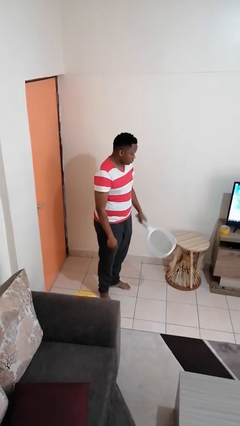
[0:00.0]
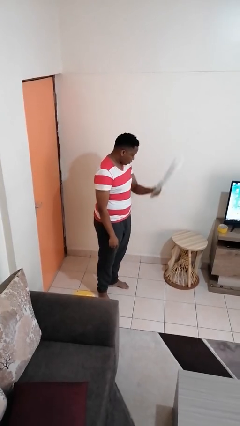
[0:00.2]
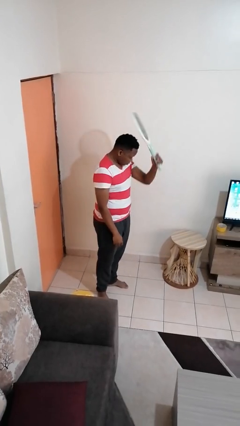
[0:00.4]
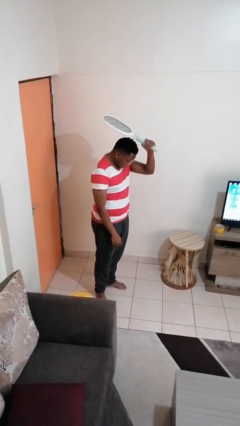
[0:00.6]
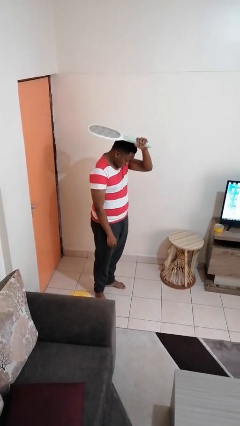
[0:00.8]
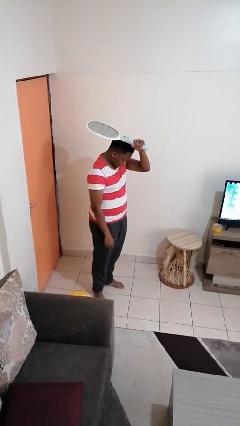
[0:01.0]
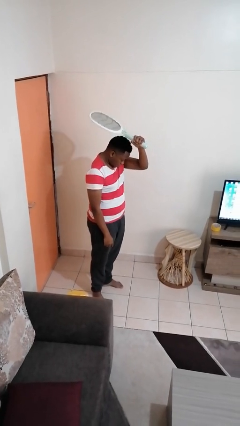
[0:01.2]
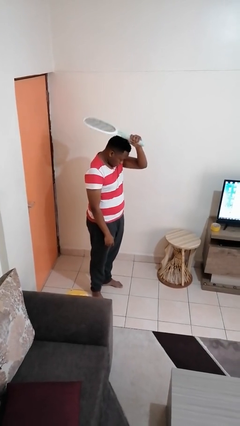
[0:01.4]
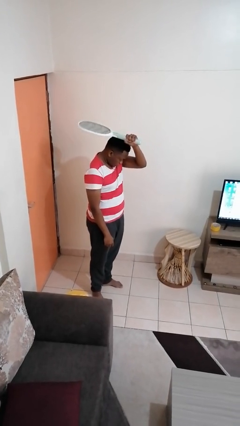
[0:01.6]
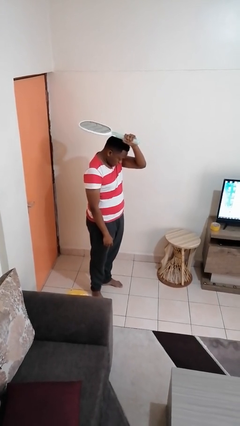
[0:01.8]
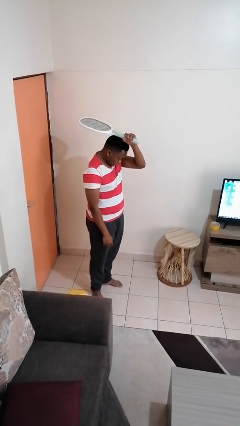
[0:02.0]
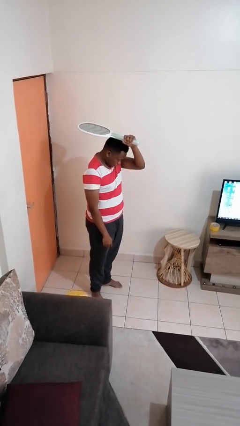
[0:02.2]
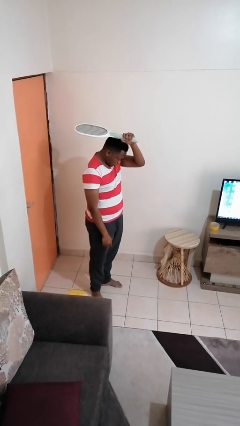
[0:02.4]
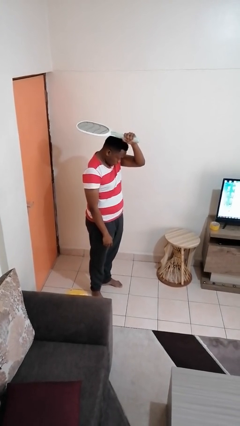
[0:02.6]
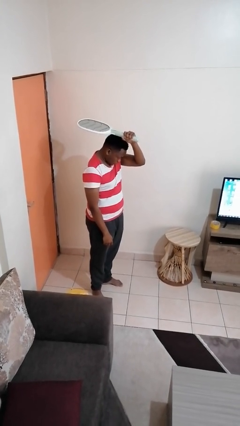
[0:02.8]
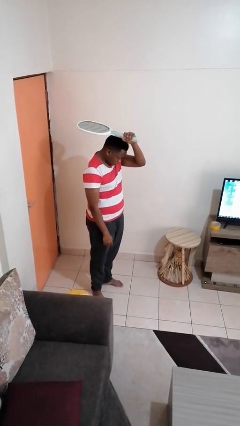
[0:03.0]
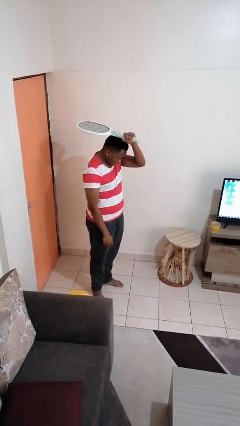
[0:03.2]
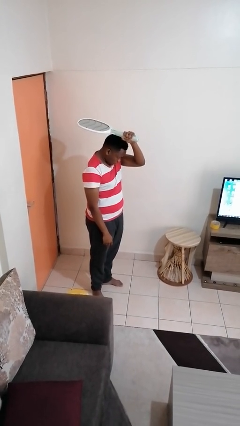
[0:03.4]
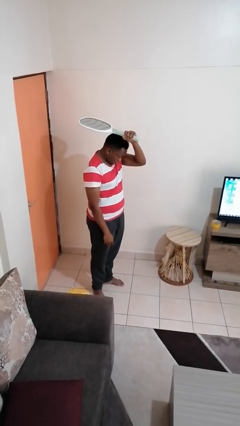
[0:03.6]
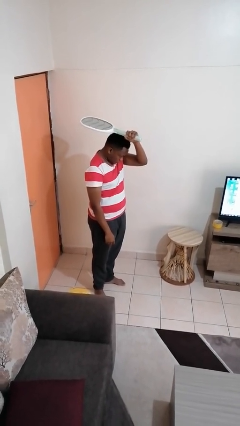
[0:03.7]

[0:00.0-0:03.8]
person holds object above head

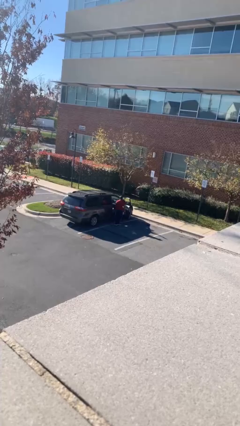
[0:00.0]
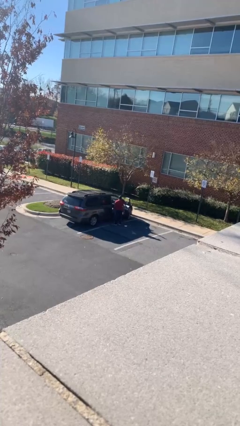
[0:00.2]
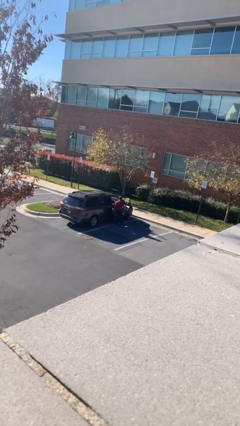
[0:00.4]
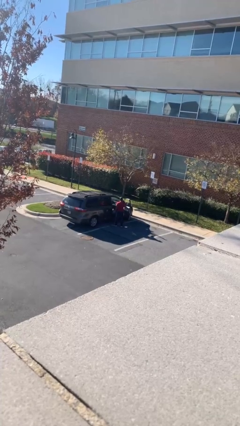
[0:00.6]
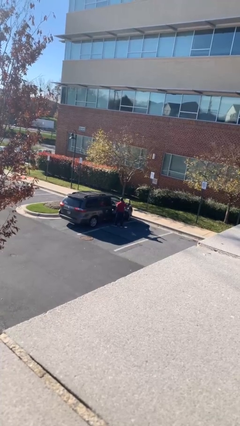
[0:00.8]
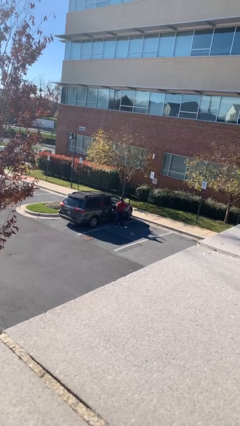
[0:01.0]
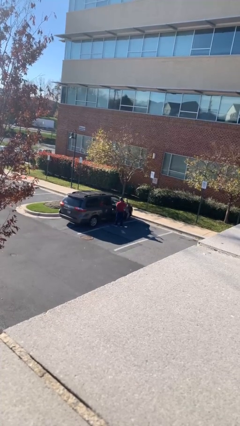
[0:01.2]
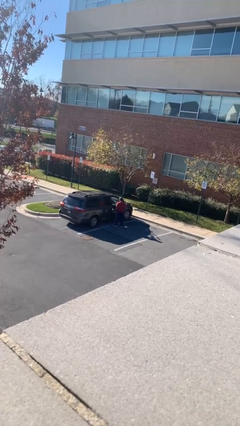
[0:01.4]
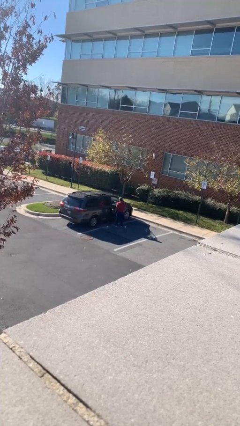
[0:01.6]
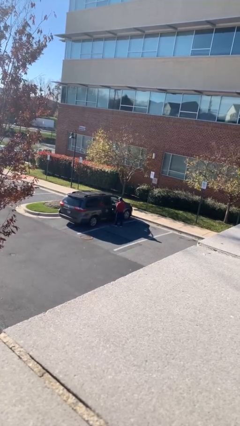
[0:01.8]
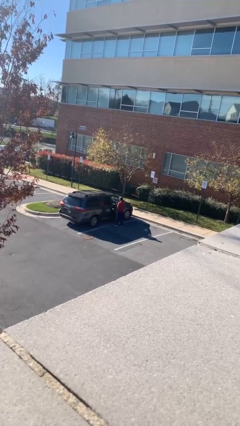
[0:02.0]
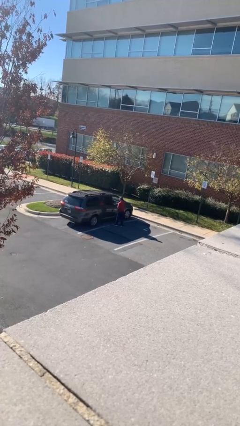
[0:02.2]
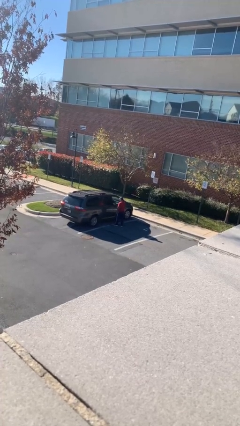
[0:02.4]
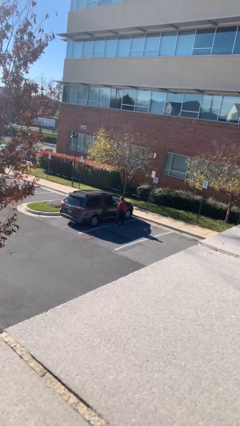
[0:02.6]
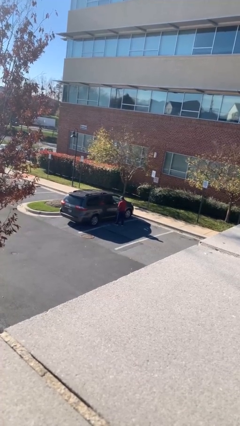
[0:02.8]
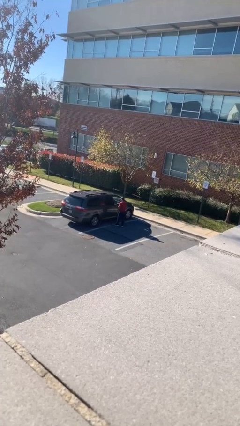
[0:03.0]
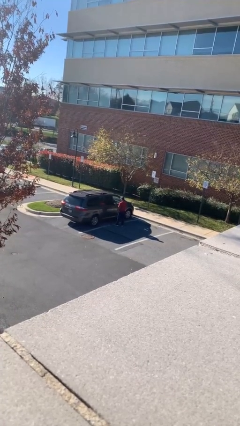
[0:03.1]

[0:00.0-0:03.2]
person closes car door

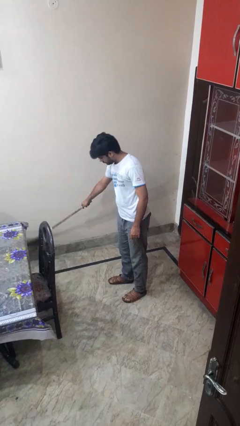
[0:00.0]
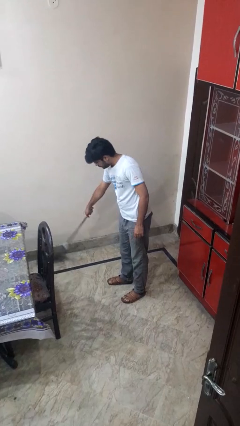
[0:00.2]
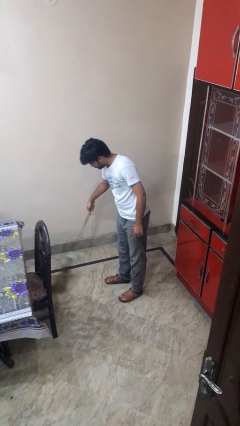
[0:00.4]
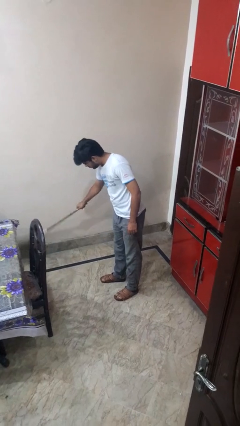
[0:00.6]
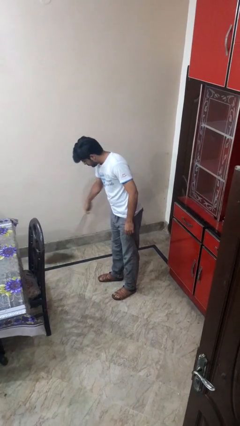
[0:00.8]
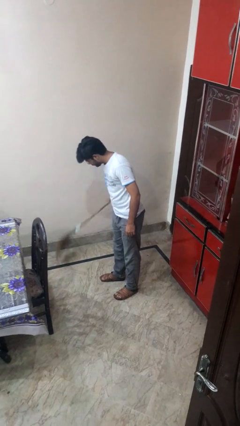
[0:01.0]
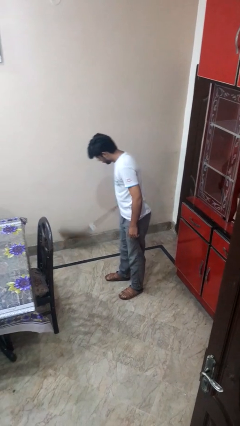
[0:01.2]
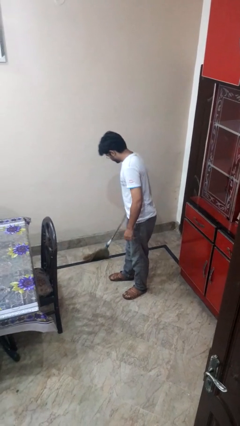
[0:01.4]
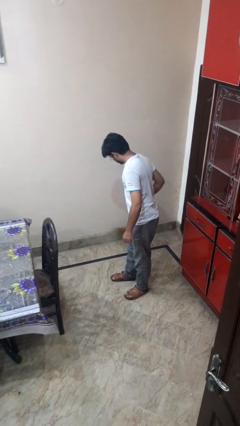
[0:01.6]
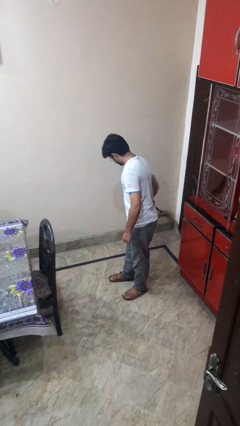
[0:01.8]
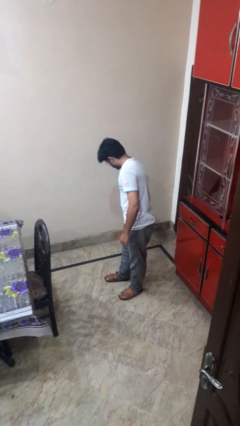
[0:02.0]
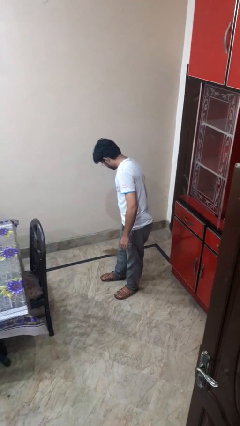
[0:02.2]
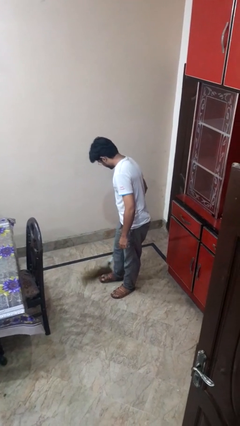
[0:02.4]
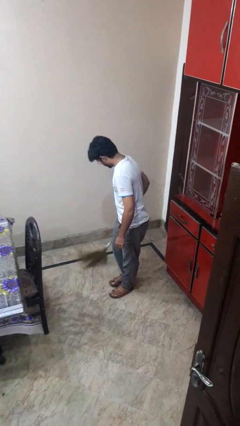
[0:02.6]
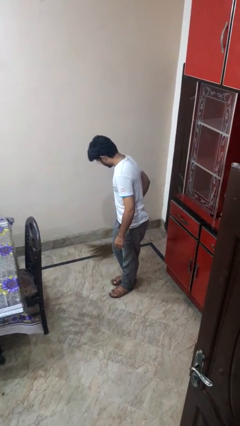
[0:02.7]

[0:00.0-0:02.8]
person sweeps floor

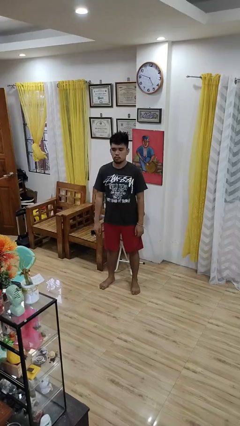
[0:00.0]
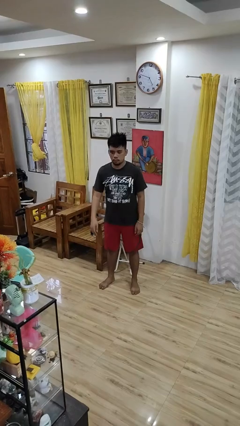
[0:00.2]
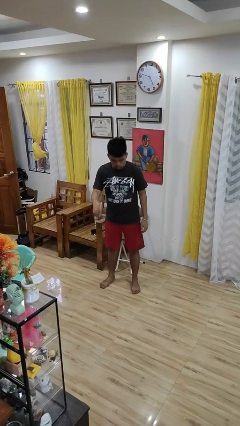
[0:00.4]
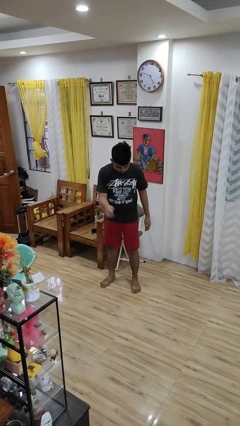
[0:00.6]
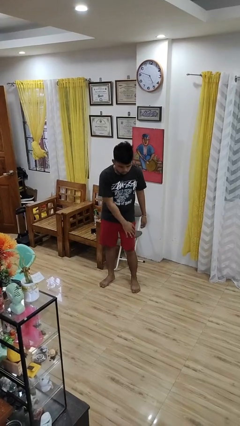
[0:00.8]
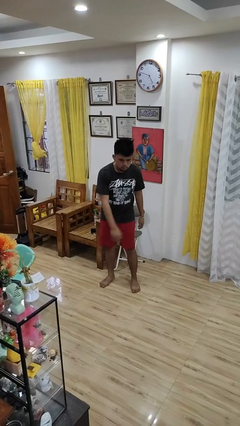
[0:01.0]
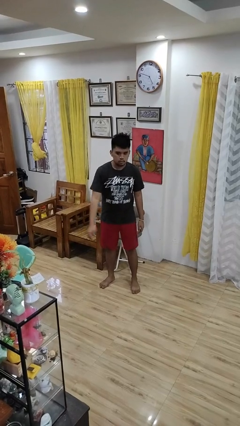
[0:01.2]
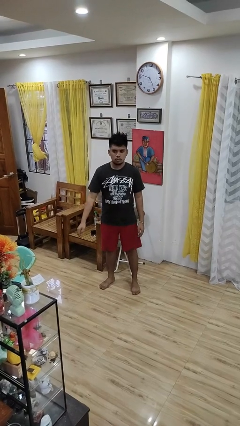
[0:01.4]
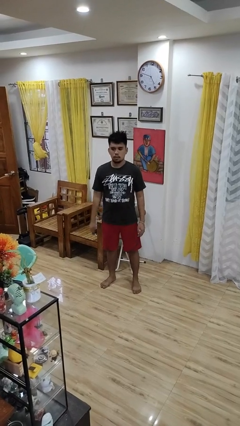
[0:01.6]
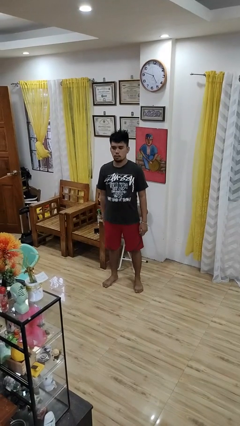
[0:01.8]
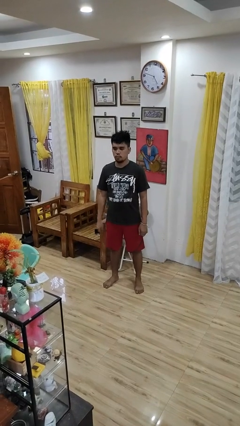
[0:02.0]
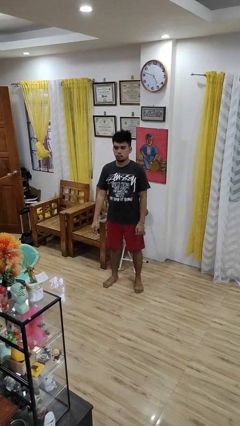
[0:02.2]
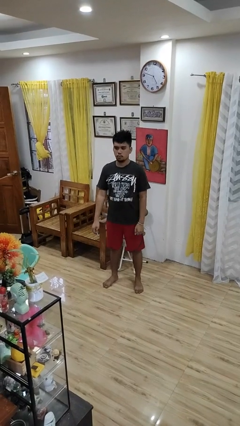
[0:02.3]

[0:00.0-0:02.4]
person slaps hands on thighs

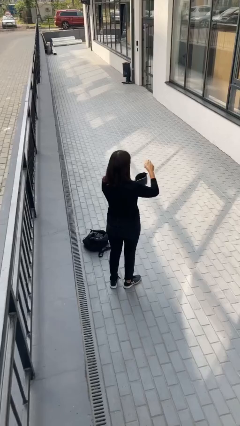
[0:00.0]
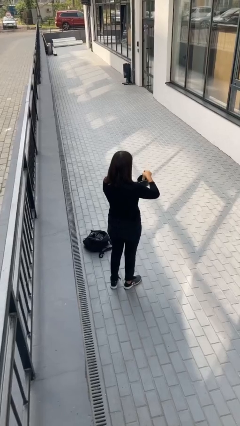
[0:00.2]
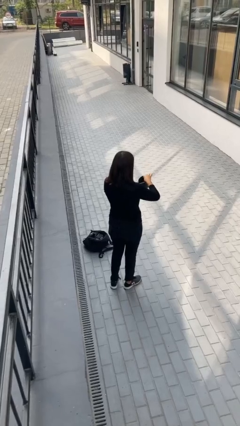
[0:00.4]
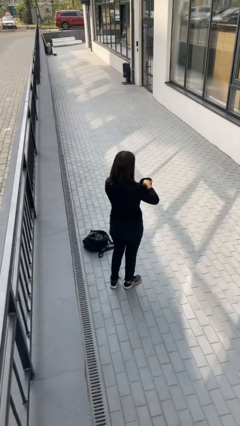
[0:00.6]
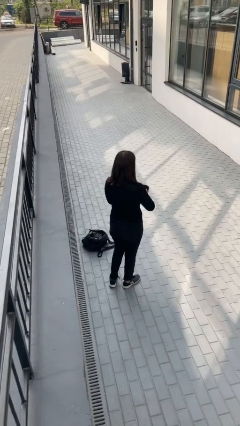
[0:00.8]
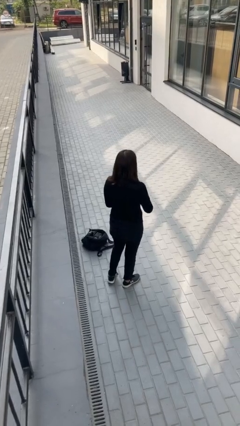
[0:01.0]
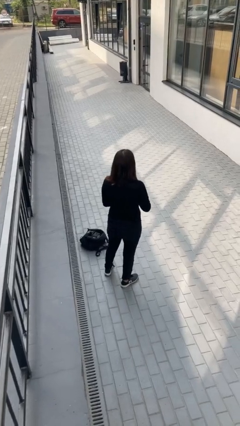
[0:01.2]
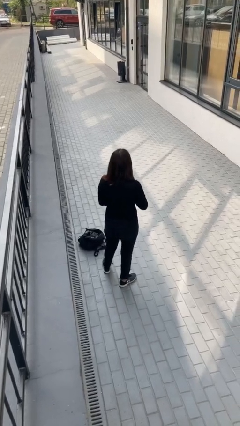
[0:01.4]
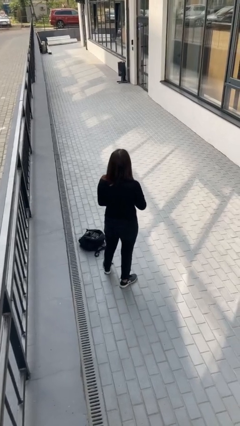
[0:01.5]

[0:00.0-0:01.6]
person puts object into purse

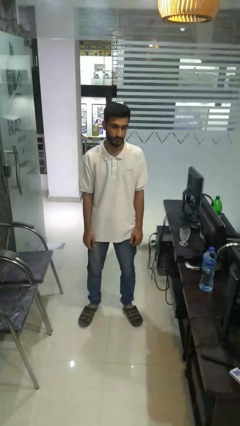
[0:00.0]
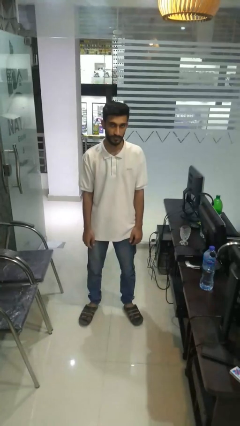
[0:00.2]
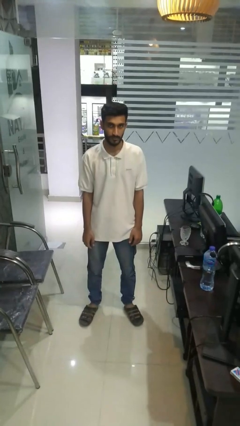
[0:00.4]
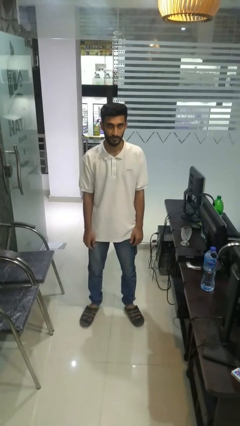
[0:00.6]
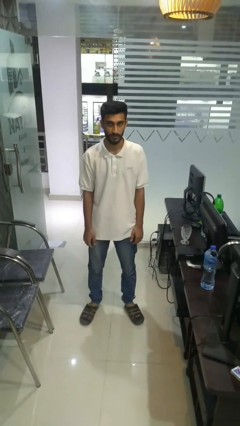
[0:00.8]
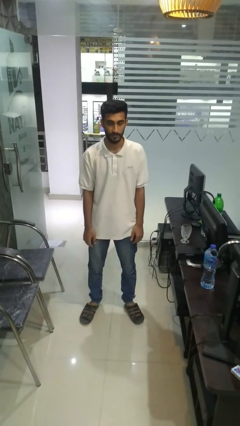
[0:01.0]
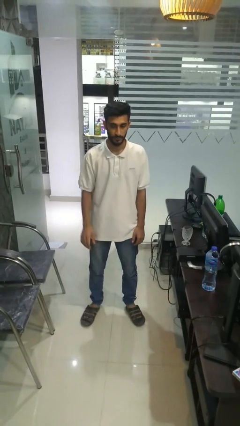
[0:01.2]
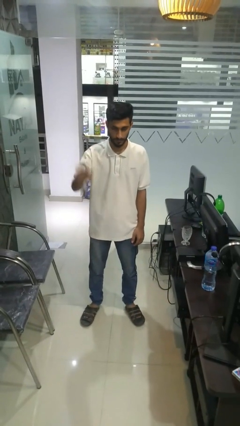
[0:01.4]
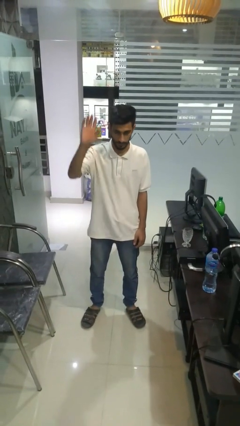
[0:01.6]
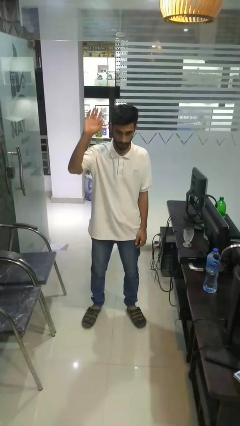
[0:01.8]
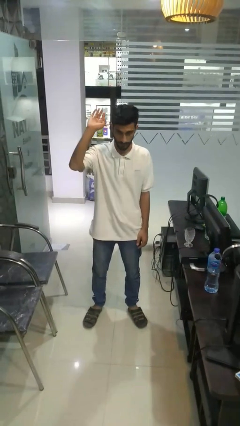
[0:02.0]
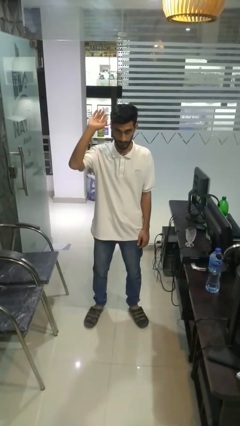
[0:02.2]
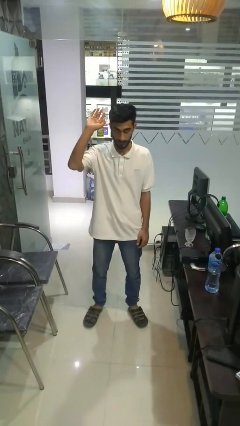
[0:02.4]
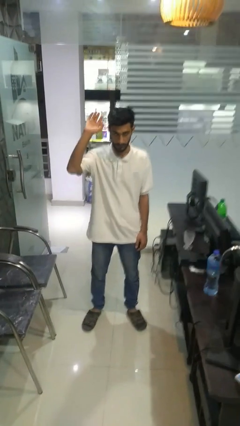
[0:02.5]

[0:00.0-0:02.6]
person gestures raise hand

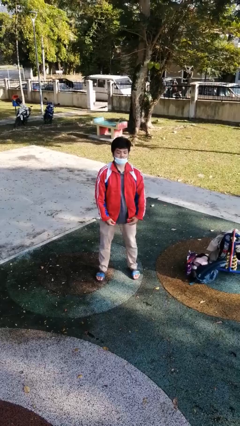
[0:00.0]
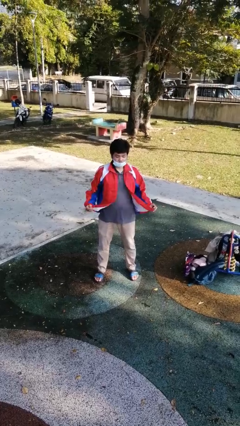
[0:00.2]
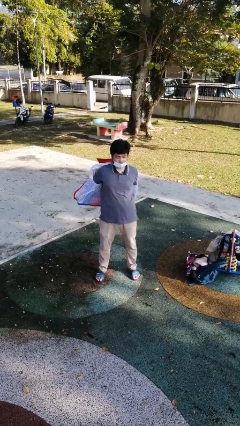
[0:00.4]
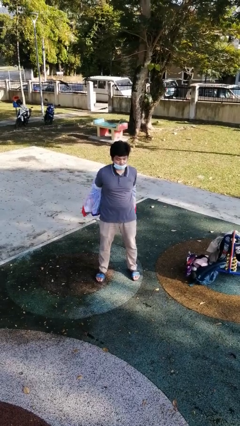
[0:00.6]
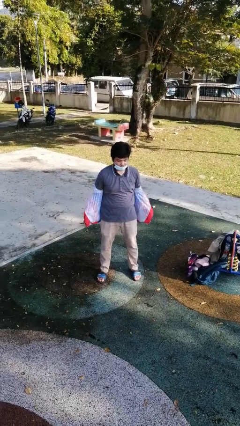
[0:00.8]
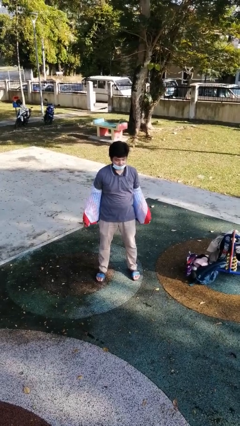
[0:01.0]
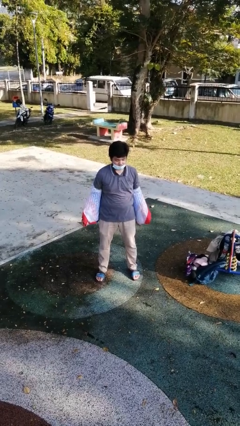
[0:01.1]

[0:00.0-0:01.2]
person takes off jacket
